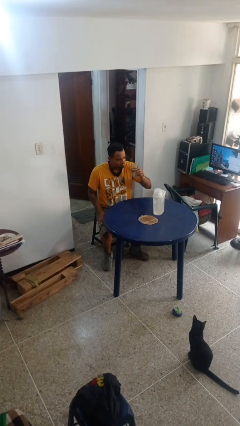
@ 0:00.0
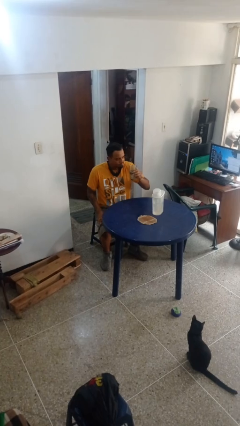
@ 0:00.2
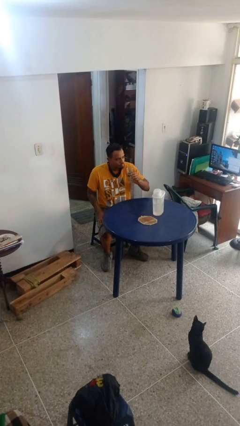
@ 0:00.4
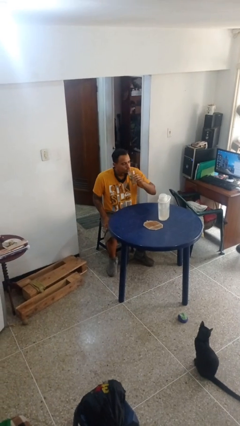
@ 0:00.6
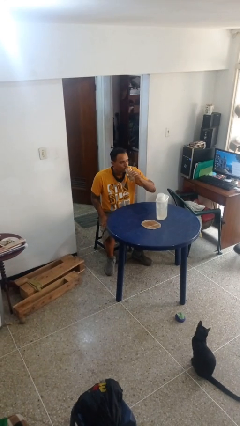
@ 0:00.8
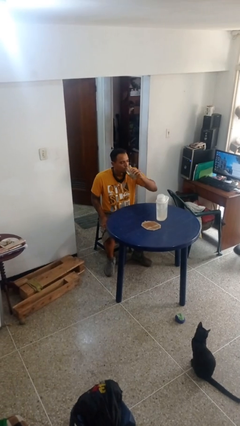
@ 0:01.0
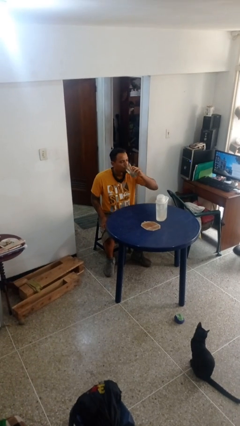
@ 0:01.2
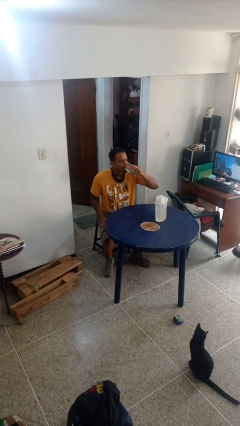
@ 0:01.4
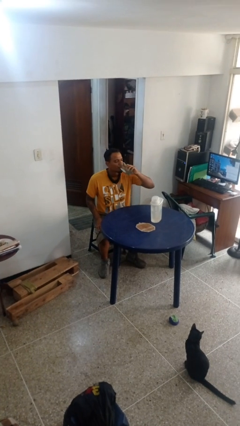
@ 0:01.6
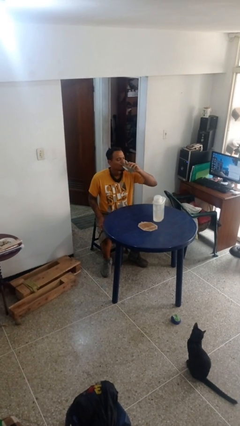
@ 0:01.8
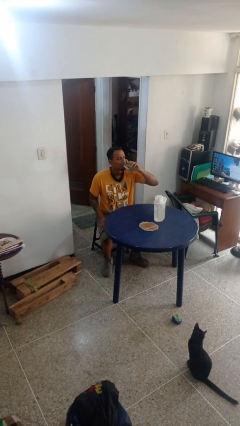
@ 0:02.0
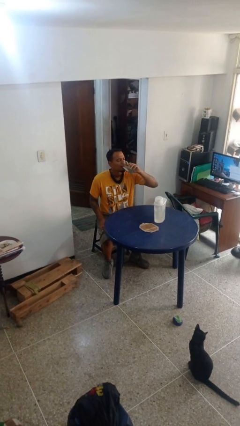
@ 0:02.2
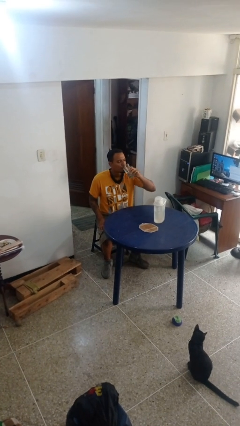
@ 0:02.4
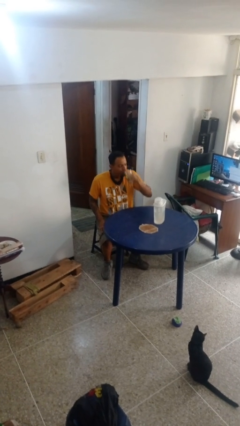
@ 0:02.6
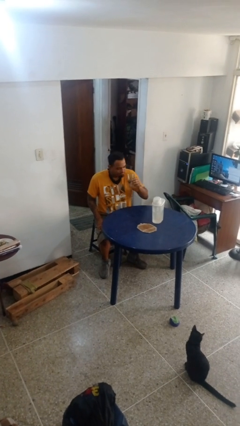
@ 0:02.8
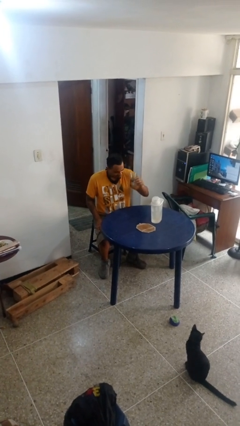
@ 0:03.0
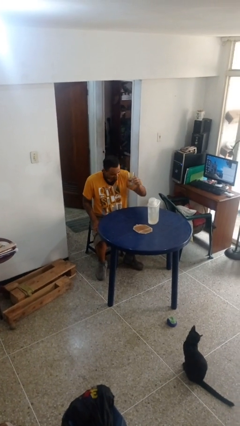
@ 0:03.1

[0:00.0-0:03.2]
person drinks from mug

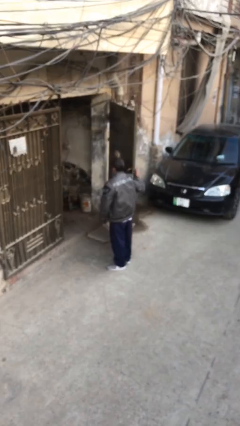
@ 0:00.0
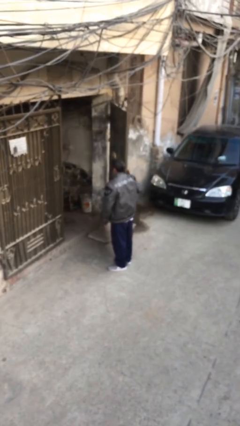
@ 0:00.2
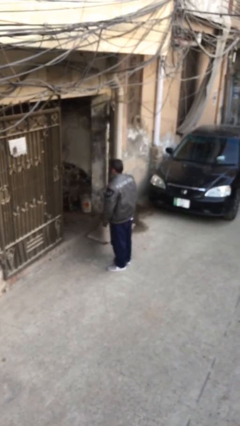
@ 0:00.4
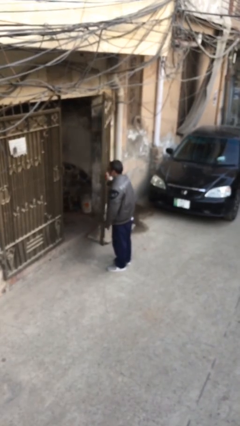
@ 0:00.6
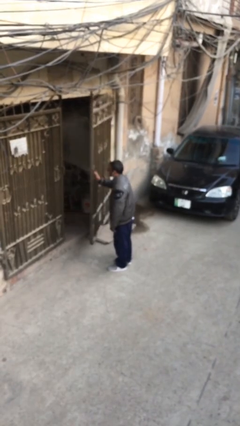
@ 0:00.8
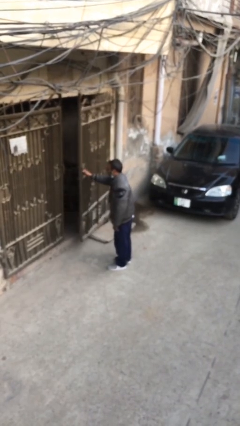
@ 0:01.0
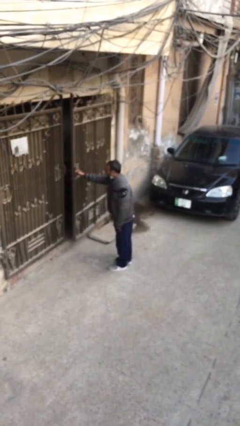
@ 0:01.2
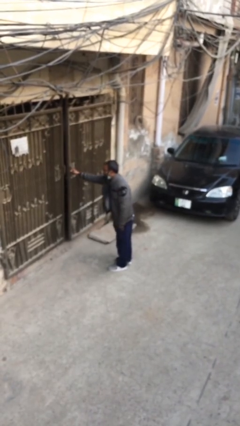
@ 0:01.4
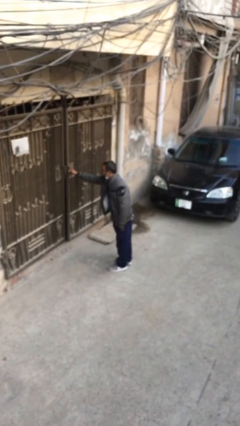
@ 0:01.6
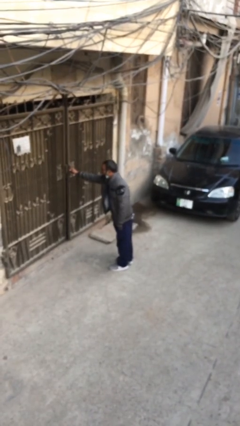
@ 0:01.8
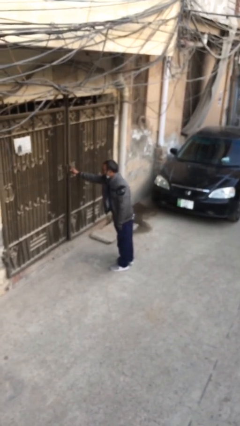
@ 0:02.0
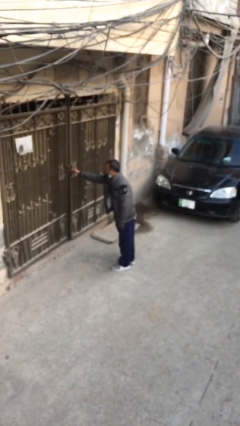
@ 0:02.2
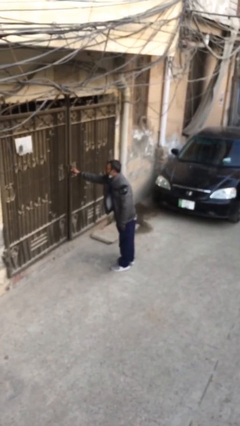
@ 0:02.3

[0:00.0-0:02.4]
person closes facility door

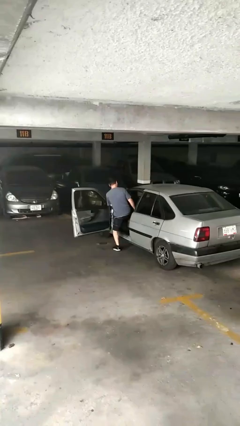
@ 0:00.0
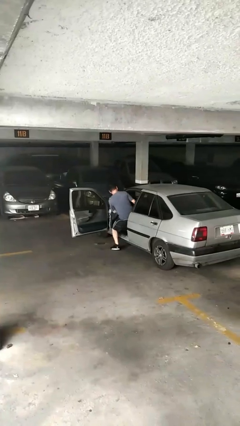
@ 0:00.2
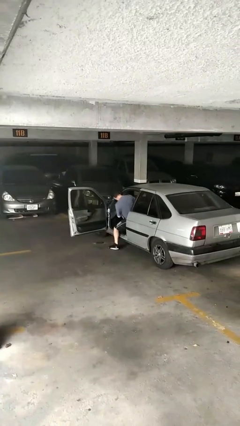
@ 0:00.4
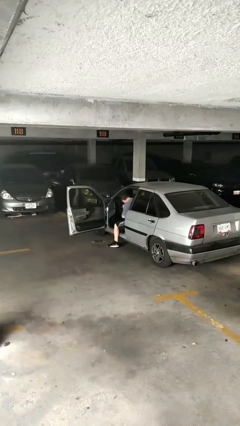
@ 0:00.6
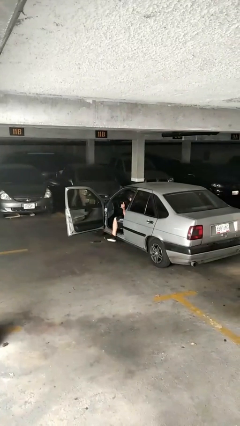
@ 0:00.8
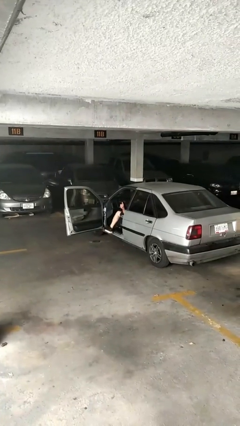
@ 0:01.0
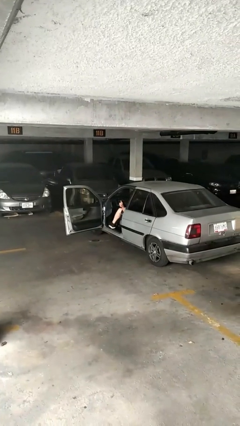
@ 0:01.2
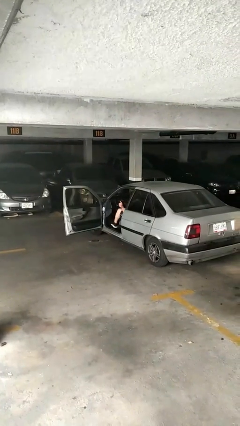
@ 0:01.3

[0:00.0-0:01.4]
person enters car

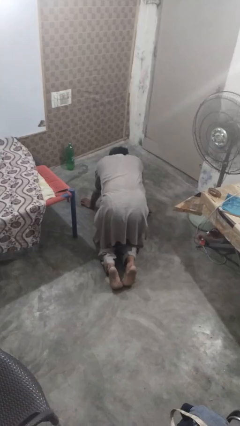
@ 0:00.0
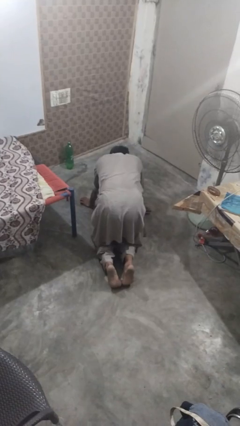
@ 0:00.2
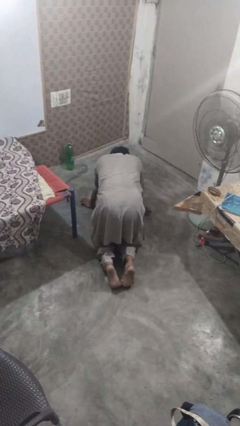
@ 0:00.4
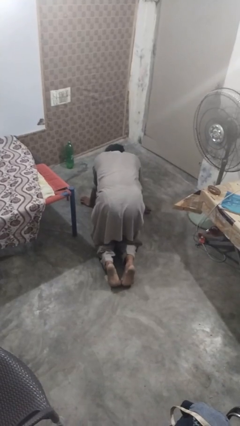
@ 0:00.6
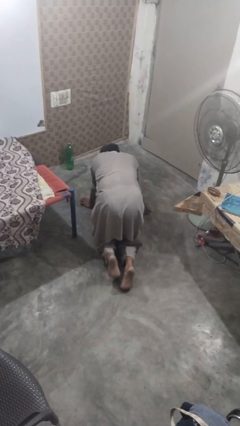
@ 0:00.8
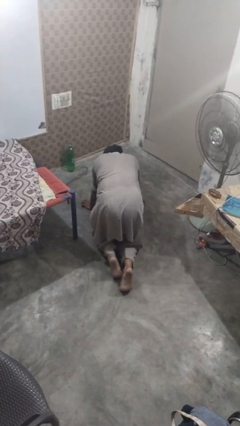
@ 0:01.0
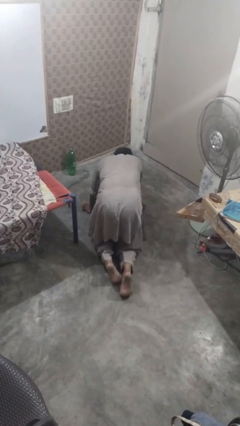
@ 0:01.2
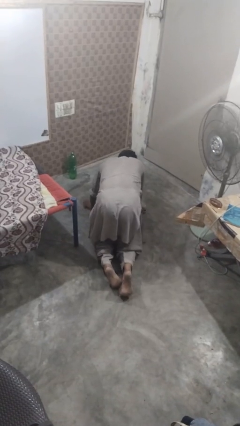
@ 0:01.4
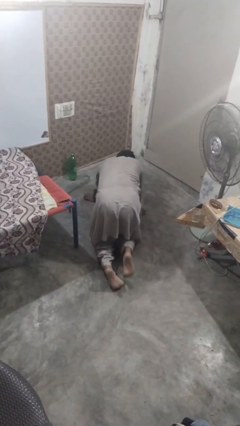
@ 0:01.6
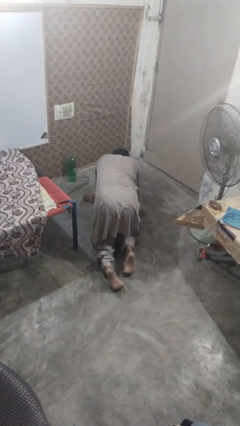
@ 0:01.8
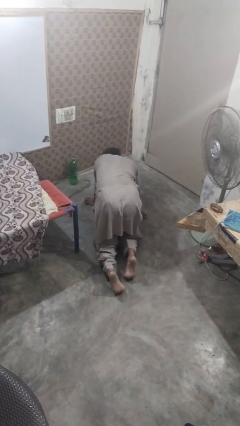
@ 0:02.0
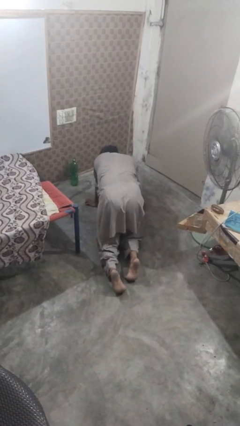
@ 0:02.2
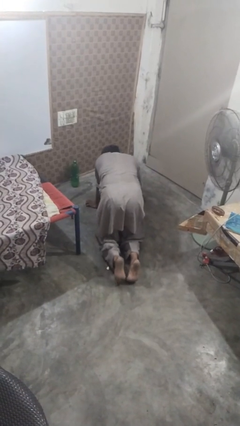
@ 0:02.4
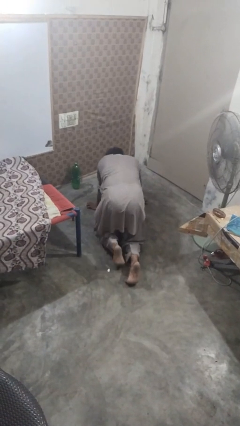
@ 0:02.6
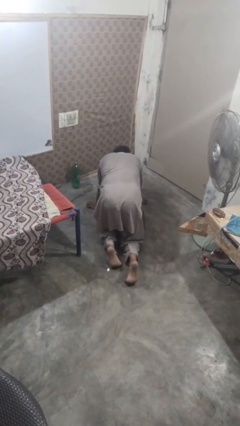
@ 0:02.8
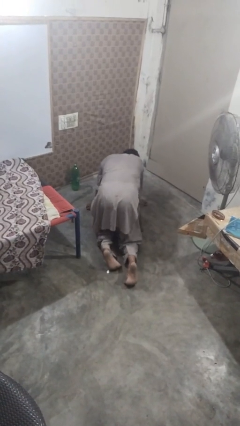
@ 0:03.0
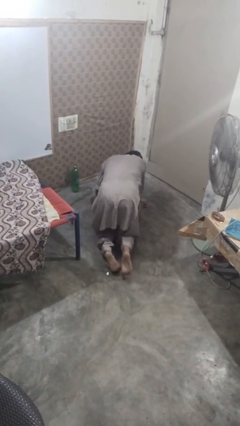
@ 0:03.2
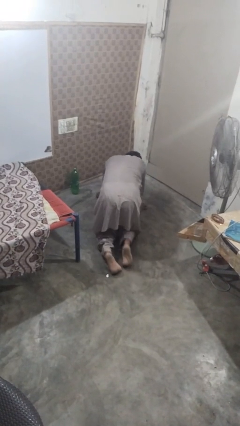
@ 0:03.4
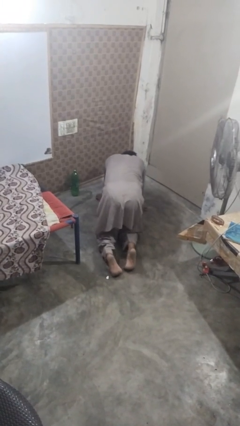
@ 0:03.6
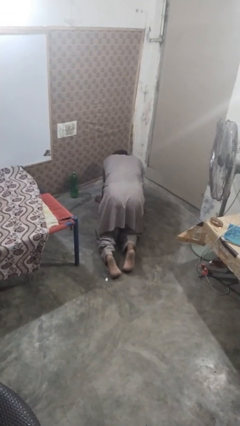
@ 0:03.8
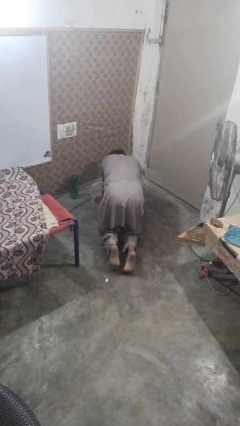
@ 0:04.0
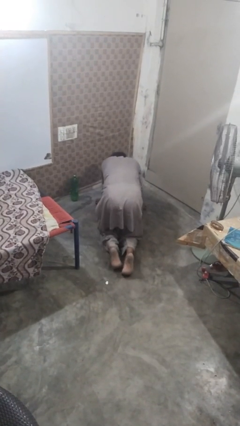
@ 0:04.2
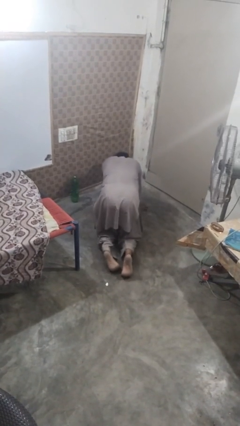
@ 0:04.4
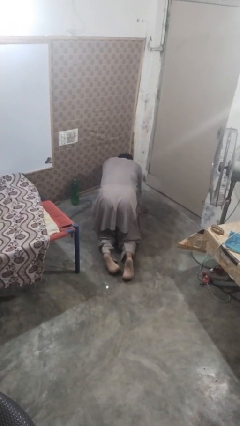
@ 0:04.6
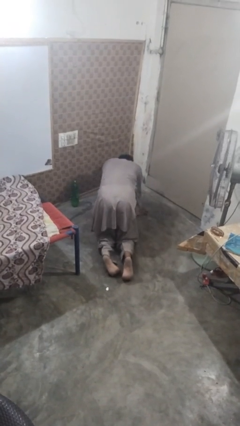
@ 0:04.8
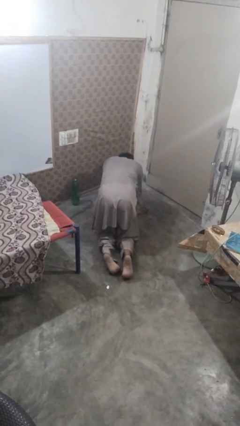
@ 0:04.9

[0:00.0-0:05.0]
person crawls

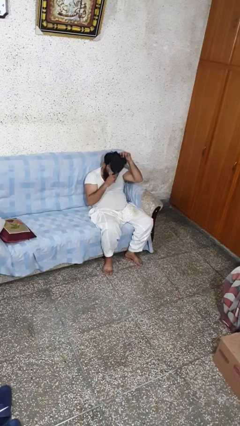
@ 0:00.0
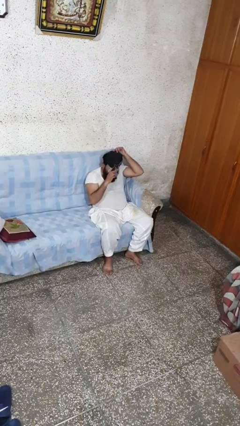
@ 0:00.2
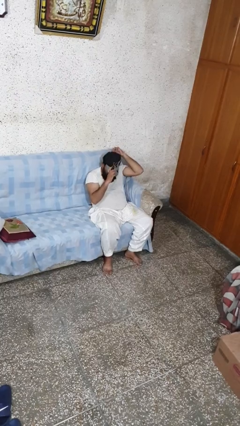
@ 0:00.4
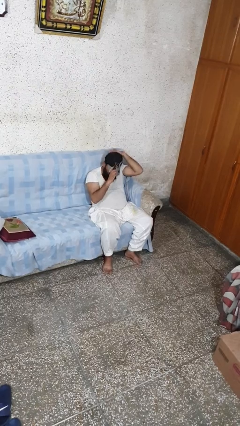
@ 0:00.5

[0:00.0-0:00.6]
person takes off hat

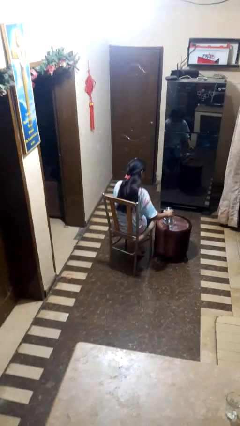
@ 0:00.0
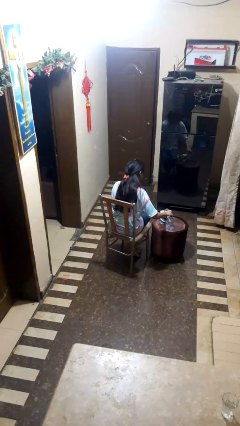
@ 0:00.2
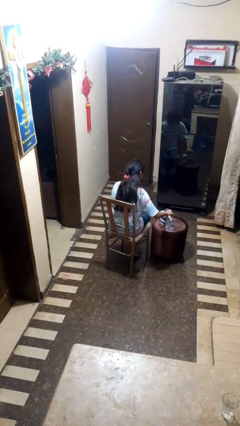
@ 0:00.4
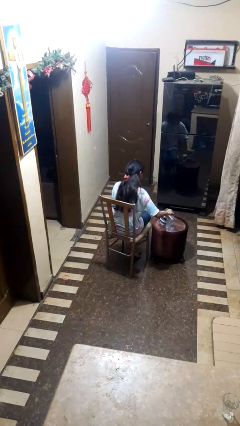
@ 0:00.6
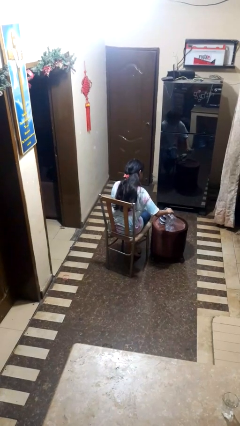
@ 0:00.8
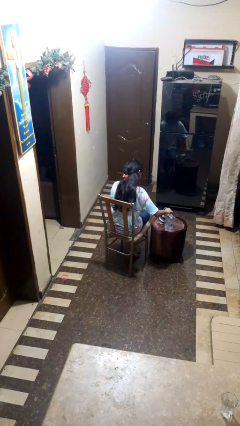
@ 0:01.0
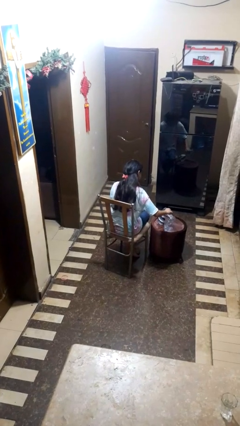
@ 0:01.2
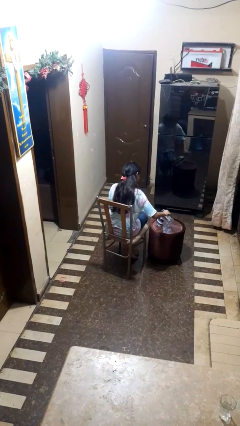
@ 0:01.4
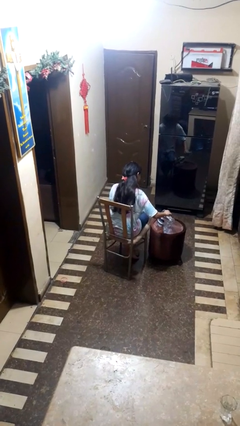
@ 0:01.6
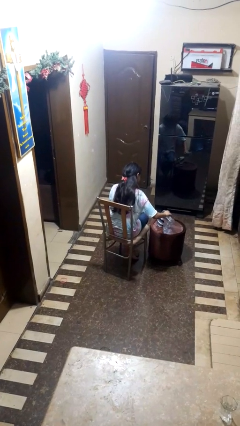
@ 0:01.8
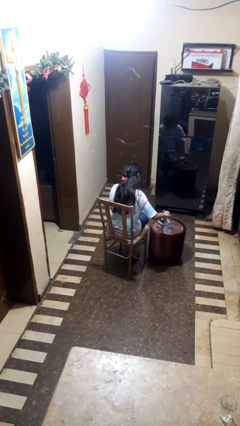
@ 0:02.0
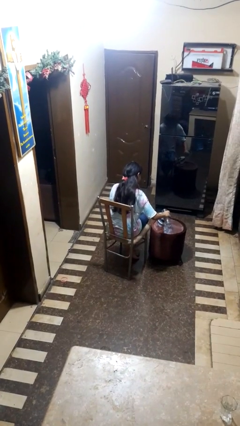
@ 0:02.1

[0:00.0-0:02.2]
person pours liquid into cup

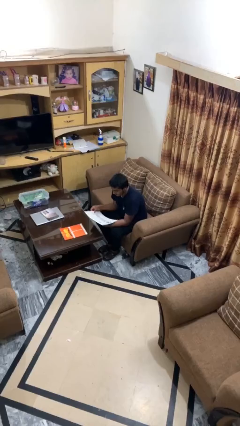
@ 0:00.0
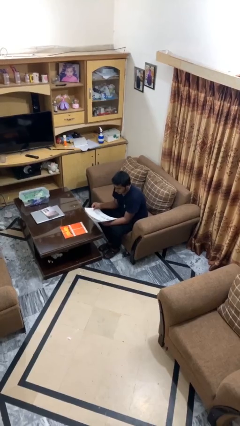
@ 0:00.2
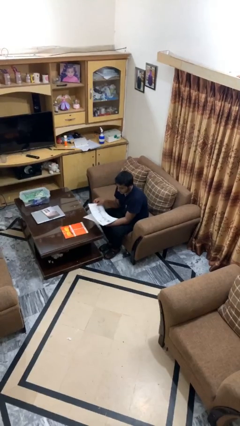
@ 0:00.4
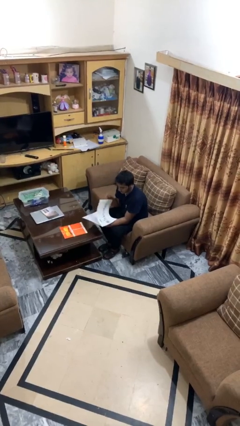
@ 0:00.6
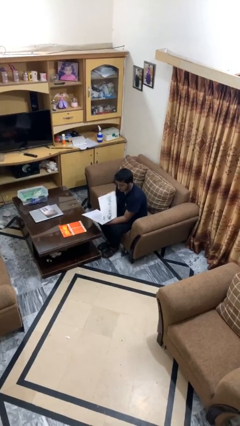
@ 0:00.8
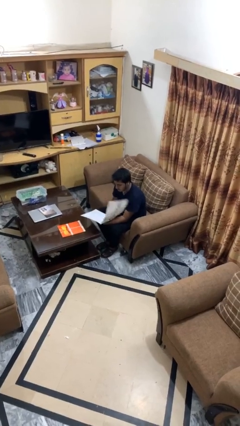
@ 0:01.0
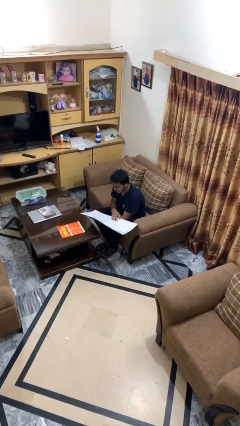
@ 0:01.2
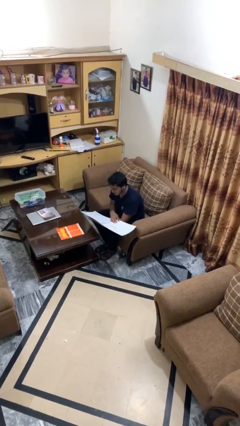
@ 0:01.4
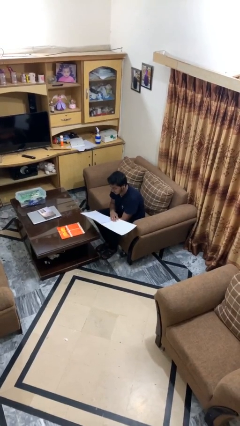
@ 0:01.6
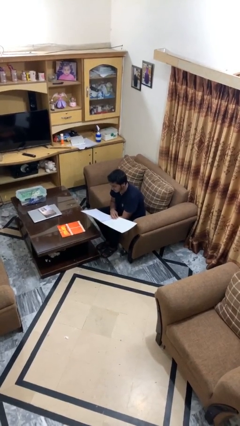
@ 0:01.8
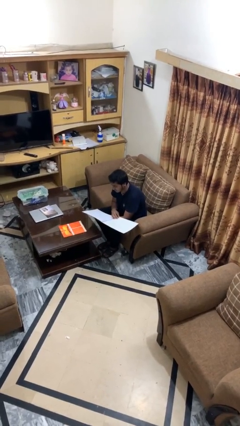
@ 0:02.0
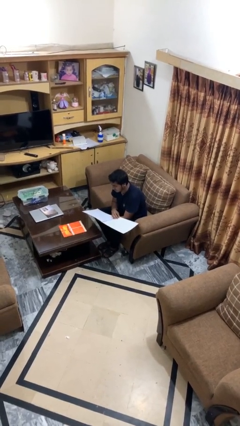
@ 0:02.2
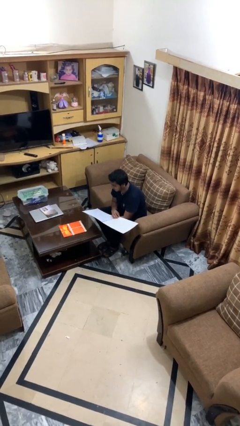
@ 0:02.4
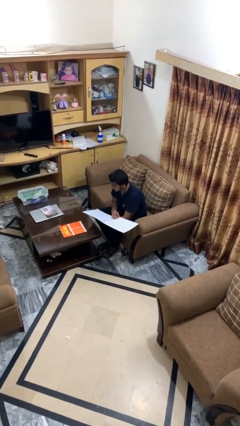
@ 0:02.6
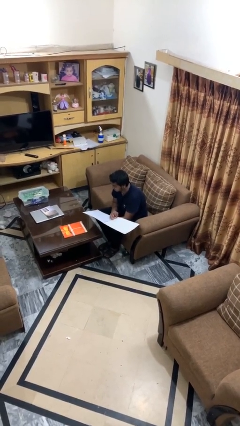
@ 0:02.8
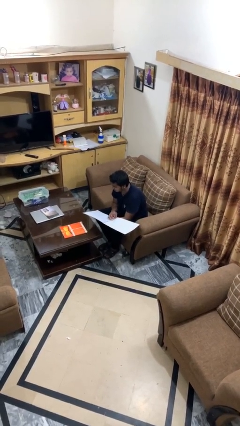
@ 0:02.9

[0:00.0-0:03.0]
person reads document
